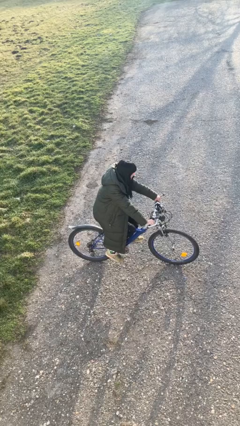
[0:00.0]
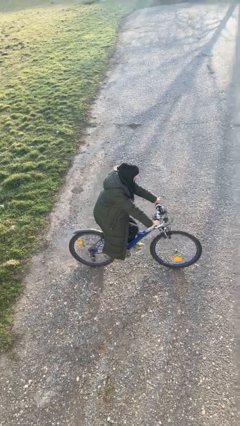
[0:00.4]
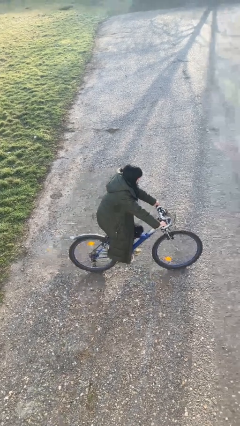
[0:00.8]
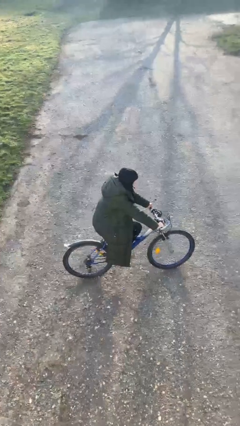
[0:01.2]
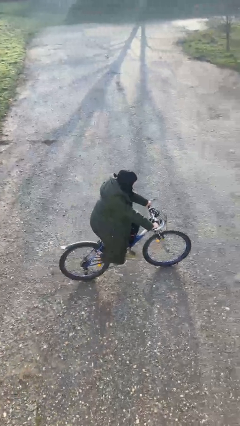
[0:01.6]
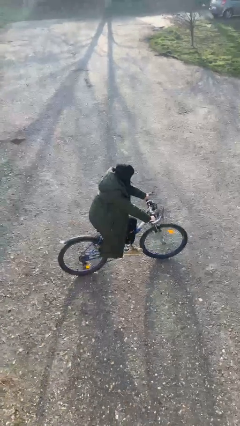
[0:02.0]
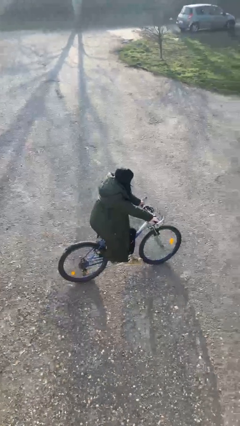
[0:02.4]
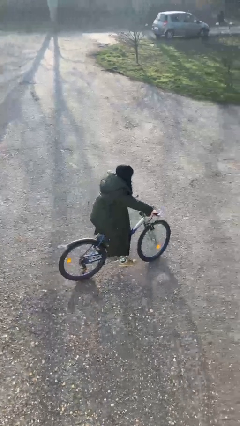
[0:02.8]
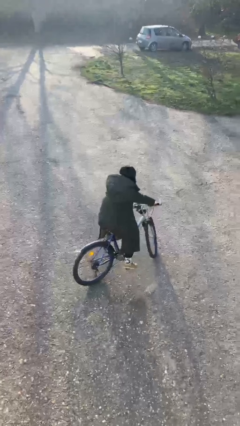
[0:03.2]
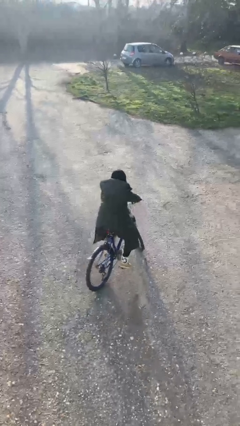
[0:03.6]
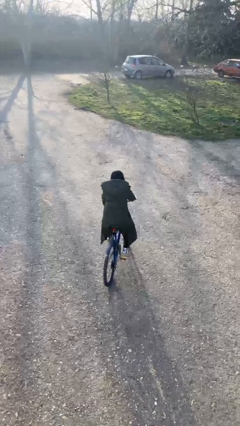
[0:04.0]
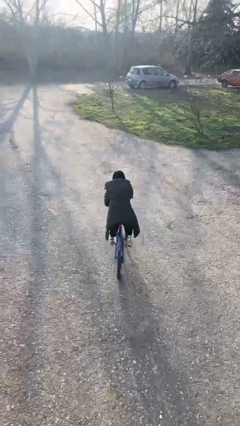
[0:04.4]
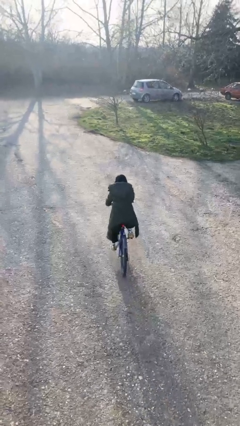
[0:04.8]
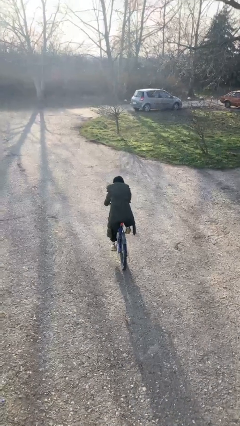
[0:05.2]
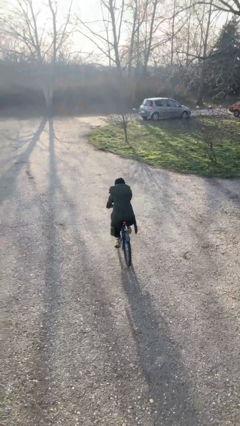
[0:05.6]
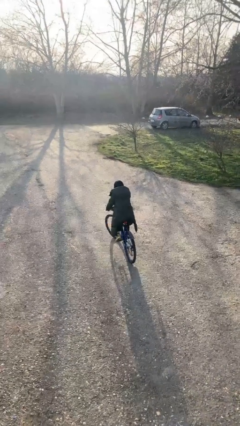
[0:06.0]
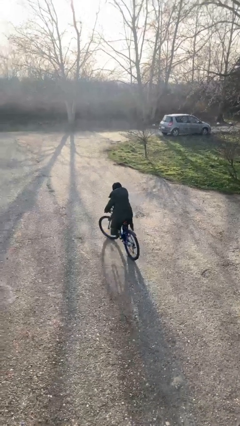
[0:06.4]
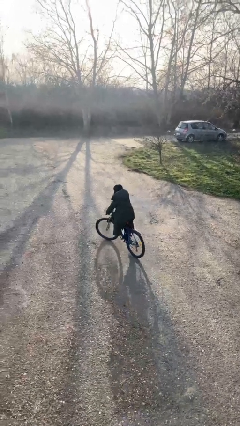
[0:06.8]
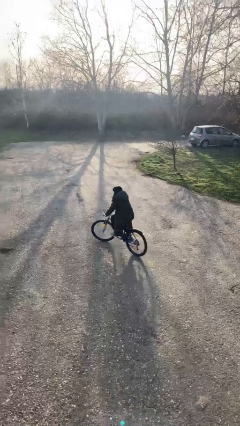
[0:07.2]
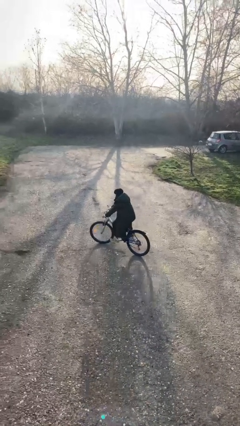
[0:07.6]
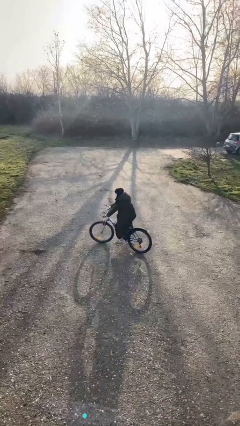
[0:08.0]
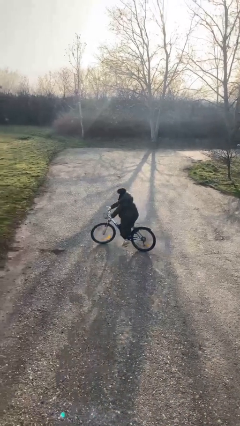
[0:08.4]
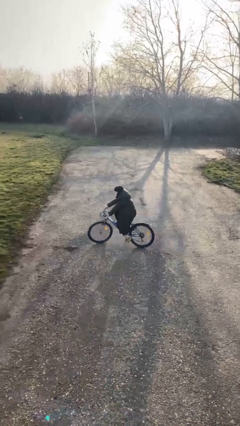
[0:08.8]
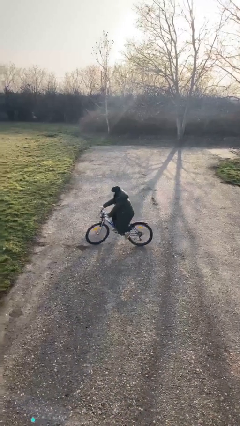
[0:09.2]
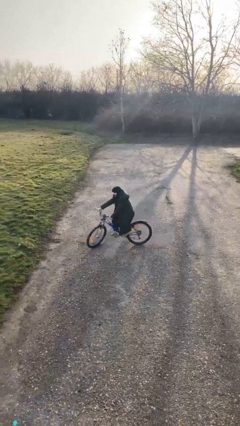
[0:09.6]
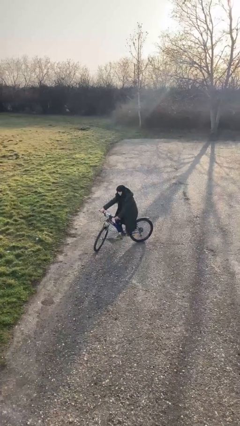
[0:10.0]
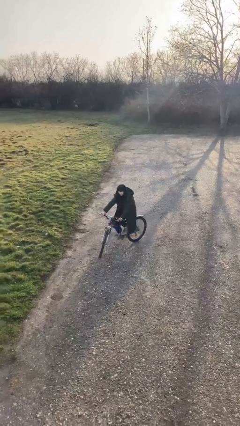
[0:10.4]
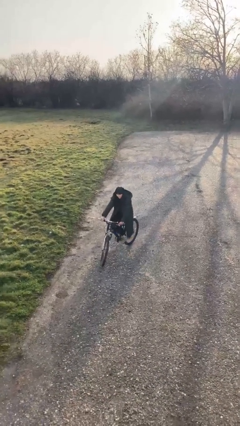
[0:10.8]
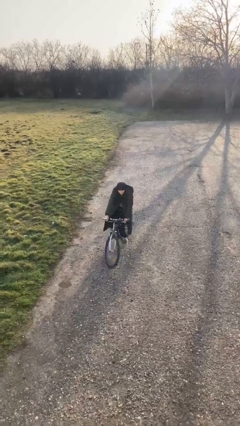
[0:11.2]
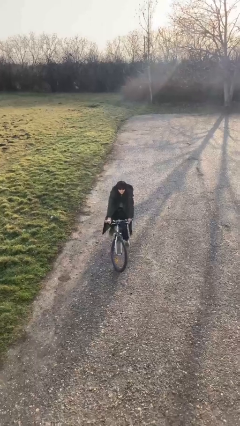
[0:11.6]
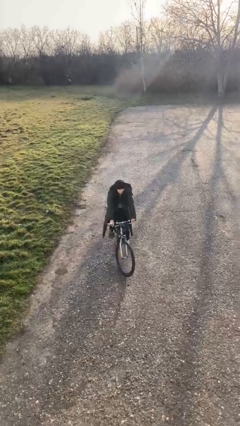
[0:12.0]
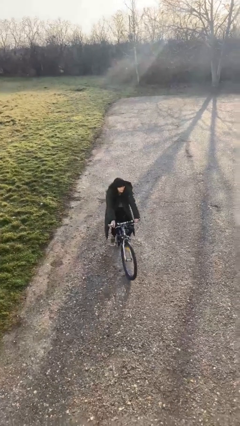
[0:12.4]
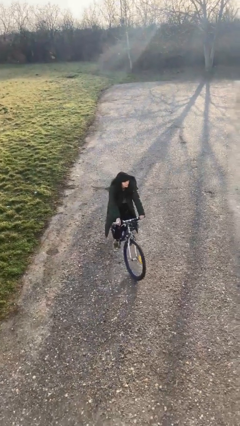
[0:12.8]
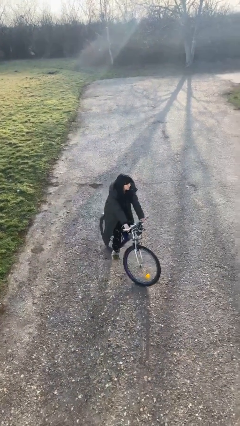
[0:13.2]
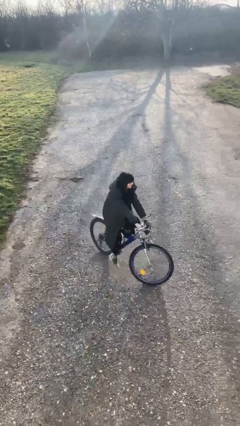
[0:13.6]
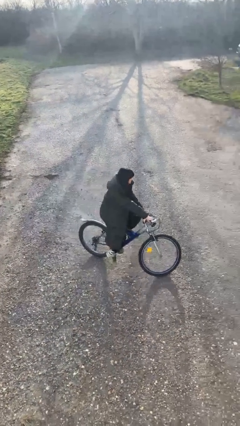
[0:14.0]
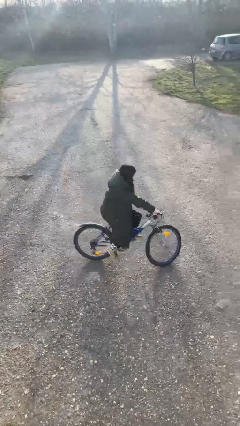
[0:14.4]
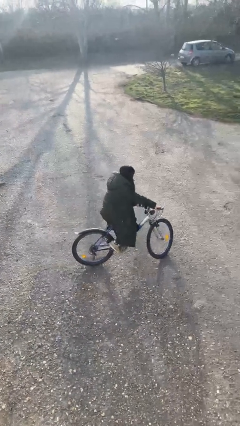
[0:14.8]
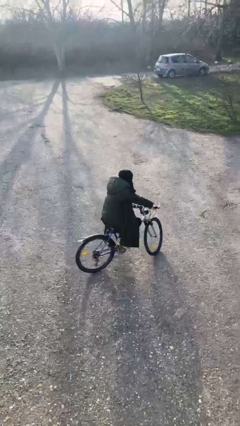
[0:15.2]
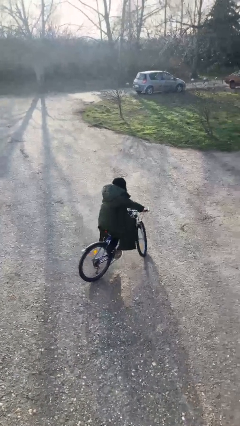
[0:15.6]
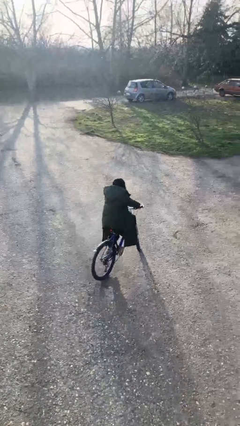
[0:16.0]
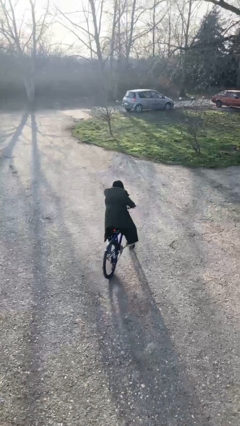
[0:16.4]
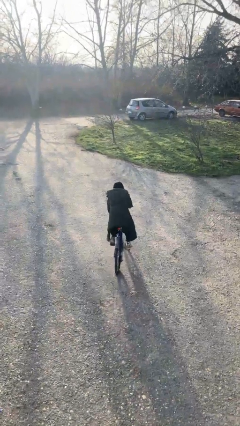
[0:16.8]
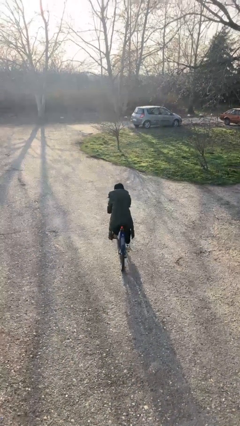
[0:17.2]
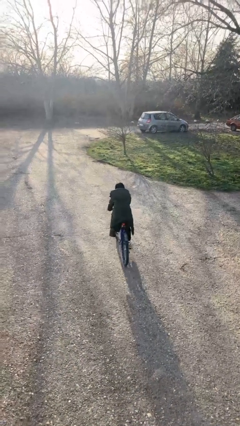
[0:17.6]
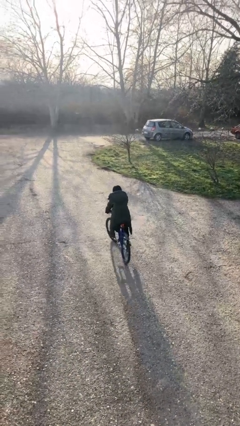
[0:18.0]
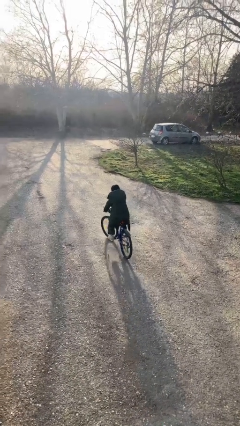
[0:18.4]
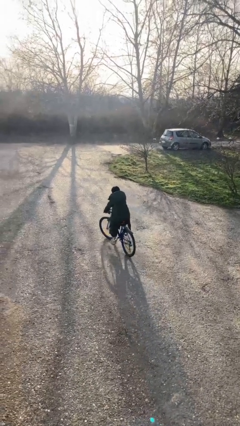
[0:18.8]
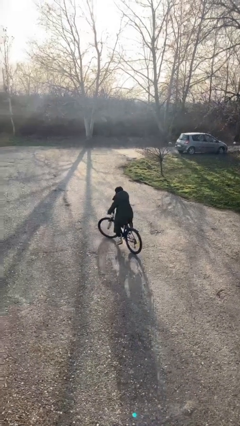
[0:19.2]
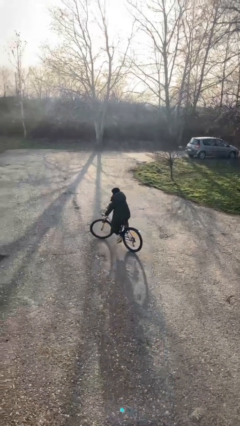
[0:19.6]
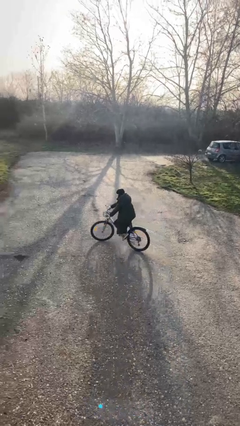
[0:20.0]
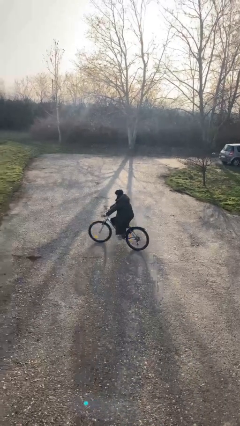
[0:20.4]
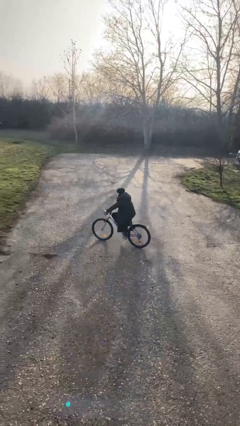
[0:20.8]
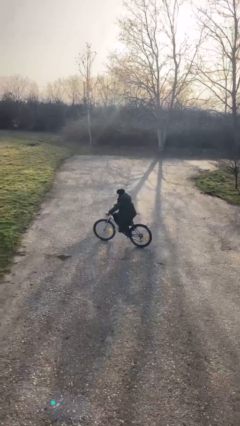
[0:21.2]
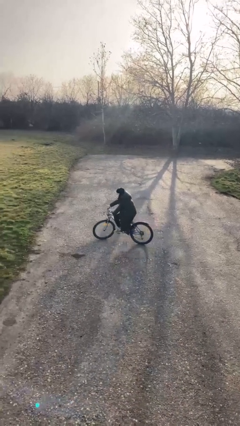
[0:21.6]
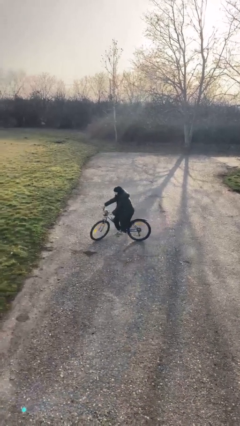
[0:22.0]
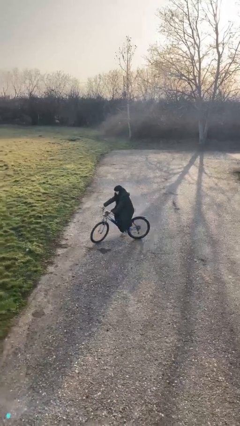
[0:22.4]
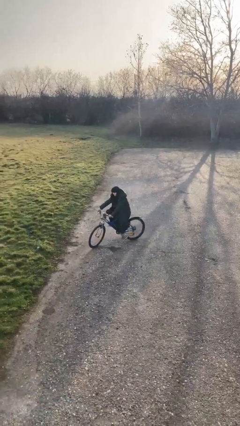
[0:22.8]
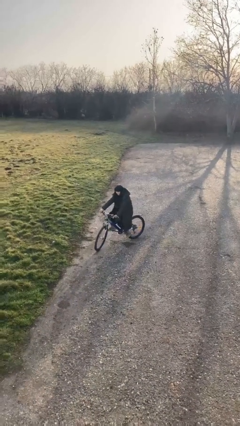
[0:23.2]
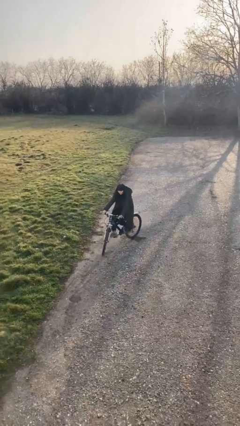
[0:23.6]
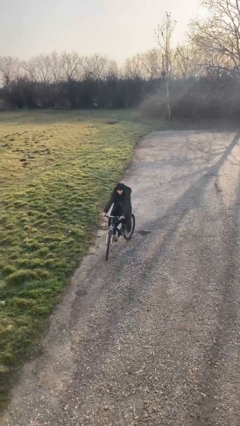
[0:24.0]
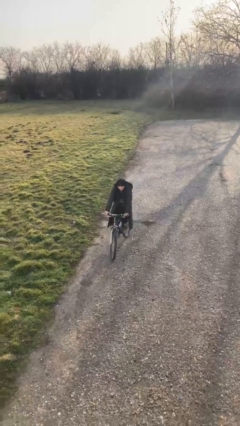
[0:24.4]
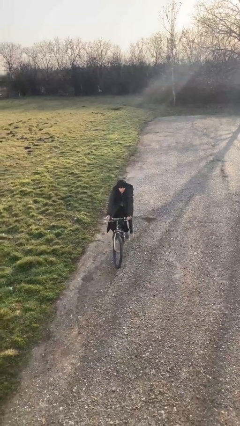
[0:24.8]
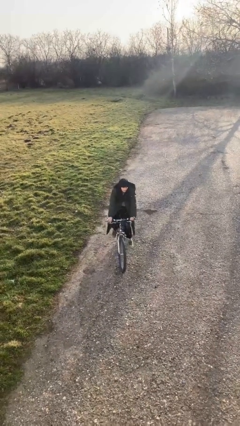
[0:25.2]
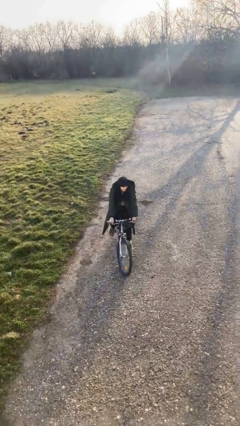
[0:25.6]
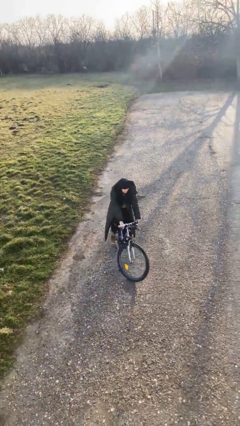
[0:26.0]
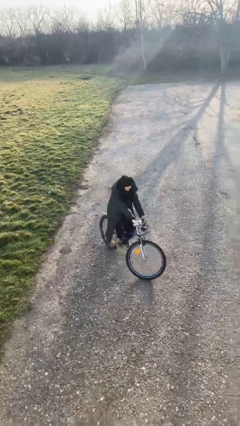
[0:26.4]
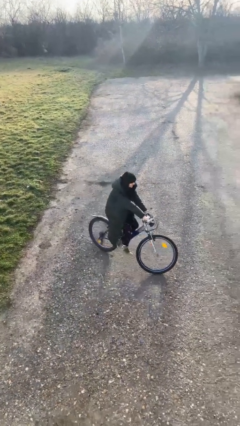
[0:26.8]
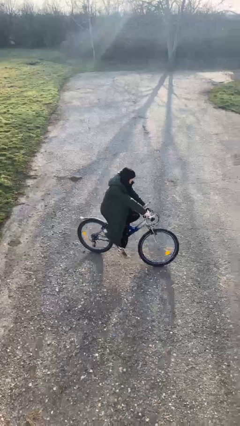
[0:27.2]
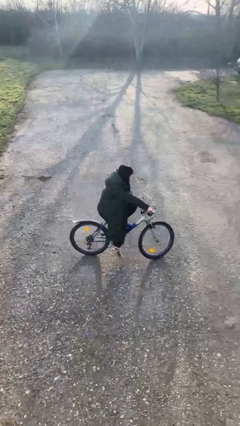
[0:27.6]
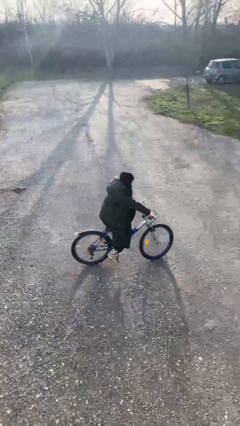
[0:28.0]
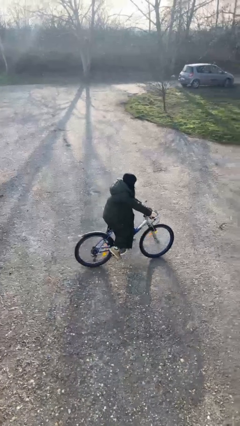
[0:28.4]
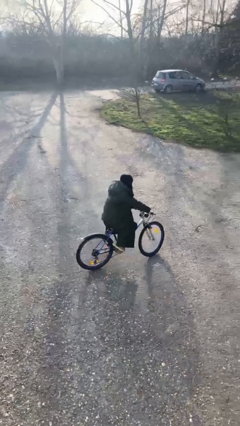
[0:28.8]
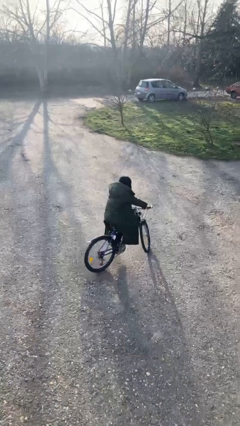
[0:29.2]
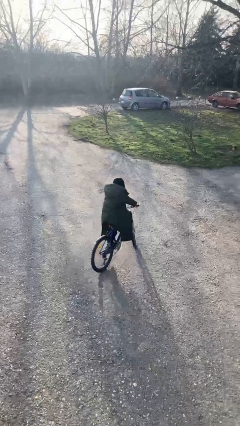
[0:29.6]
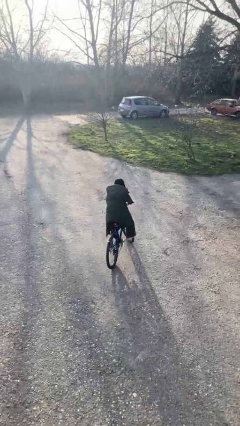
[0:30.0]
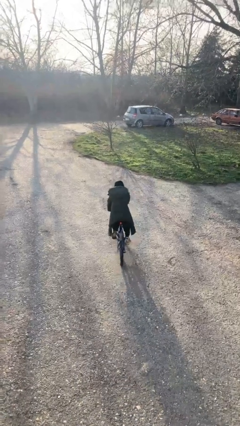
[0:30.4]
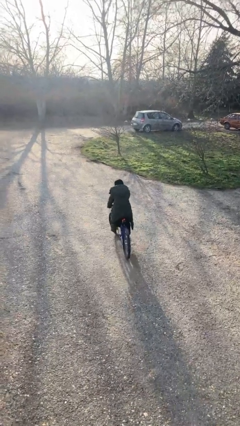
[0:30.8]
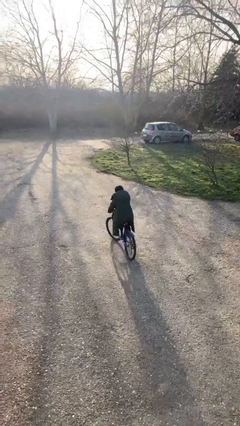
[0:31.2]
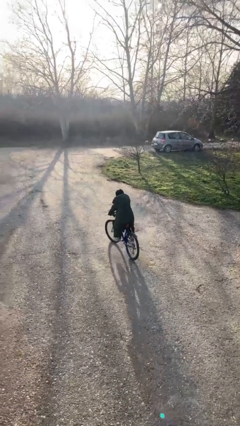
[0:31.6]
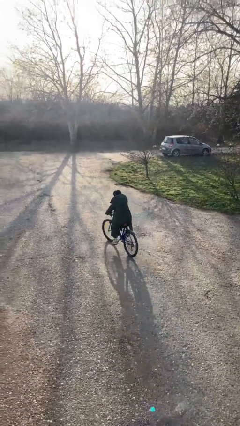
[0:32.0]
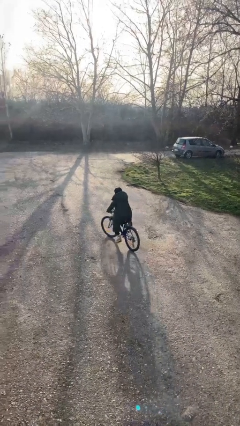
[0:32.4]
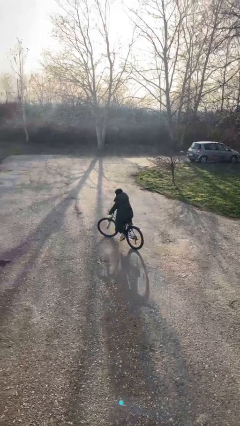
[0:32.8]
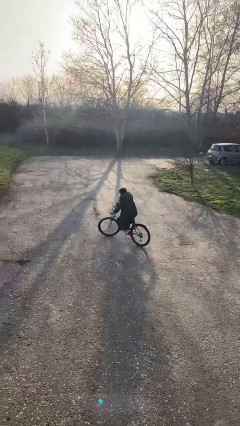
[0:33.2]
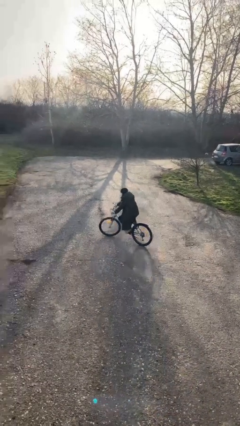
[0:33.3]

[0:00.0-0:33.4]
person rides bicycle

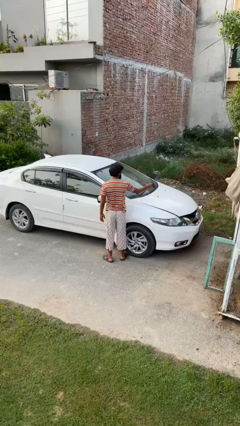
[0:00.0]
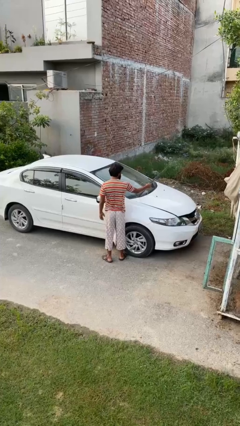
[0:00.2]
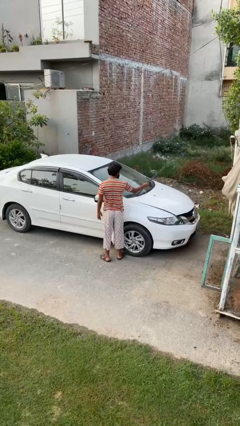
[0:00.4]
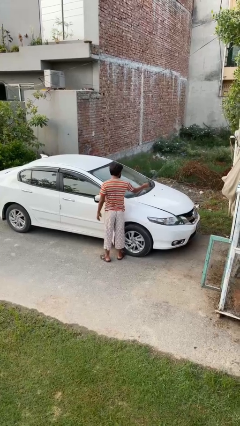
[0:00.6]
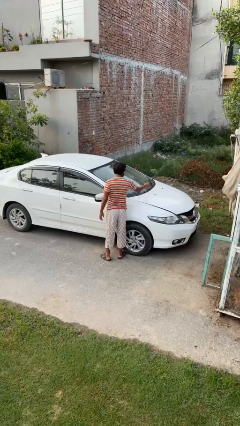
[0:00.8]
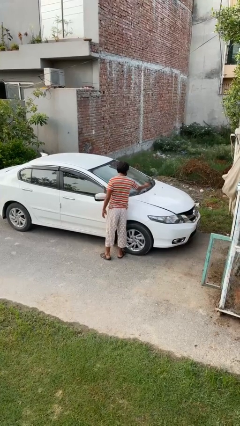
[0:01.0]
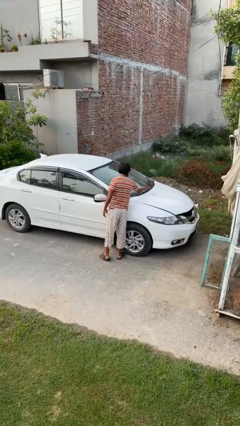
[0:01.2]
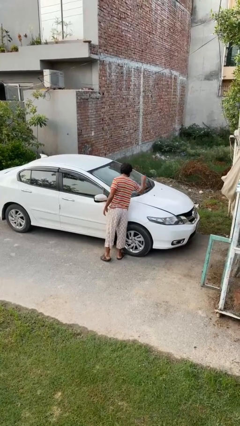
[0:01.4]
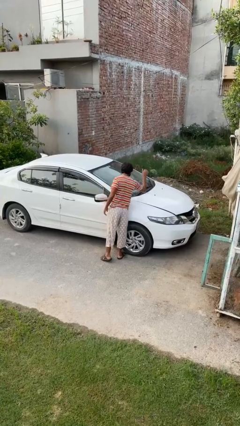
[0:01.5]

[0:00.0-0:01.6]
person flips down car wipers
